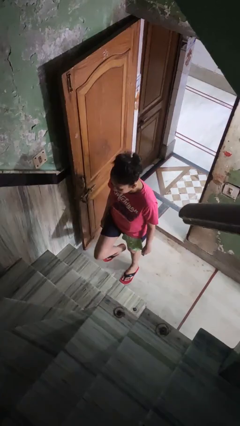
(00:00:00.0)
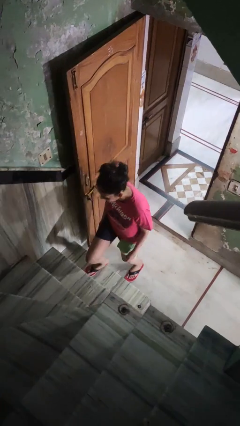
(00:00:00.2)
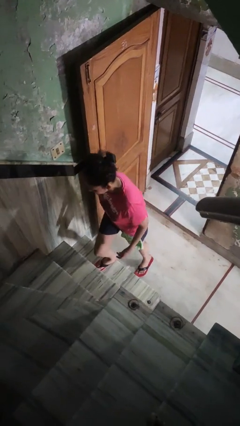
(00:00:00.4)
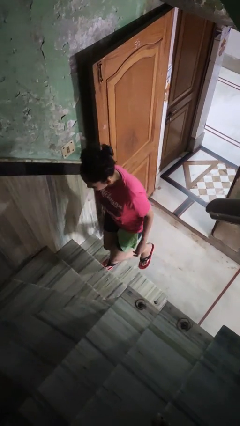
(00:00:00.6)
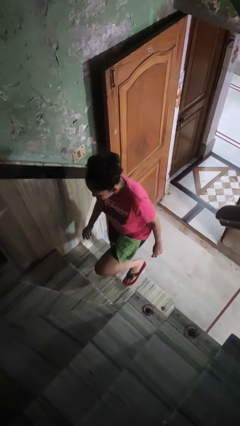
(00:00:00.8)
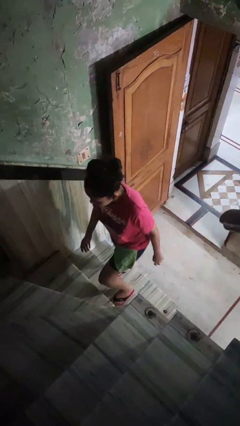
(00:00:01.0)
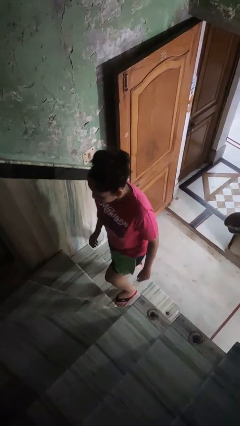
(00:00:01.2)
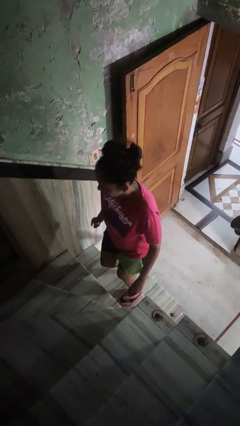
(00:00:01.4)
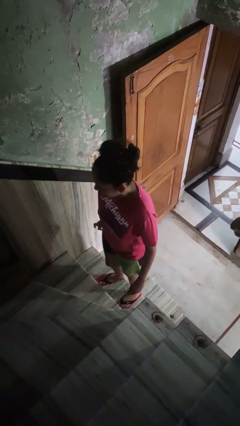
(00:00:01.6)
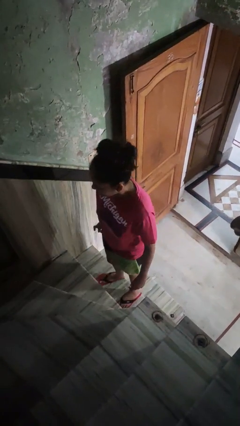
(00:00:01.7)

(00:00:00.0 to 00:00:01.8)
person climbs up stairs

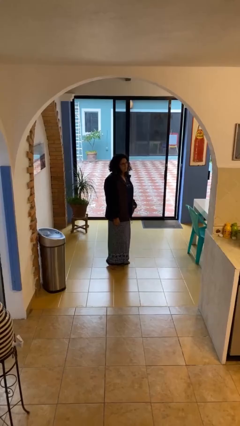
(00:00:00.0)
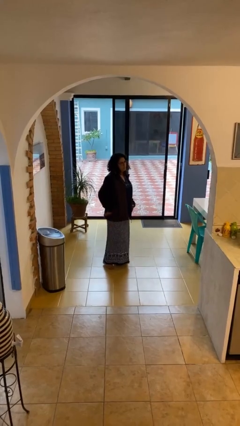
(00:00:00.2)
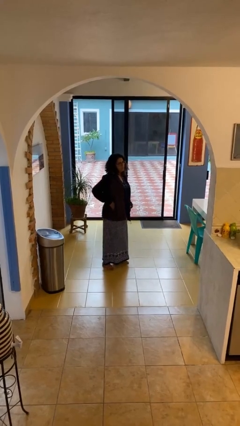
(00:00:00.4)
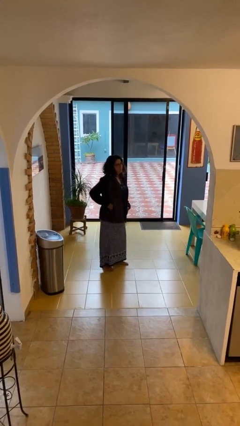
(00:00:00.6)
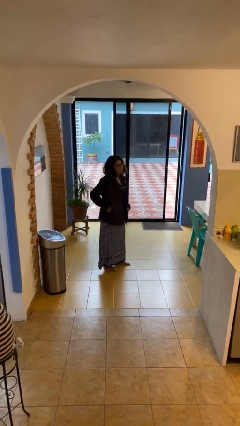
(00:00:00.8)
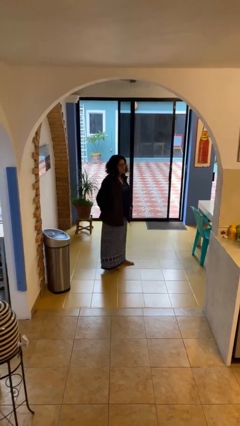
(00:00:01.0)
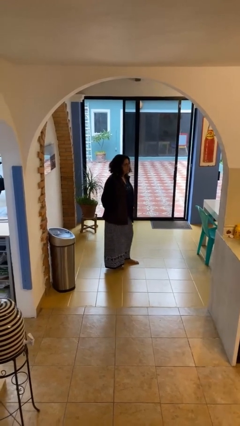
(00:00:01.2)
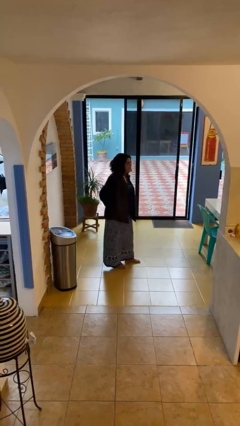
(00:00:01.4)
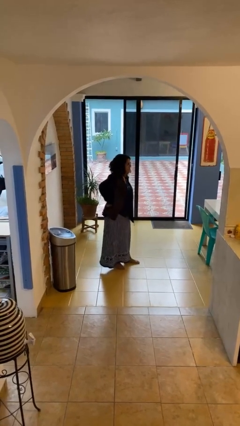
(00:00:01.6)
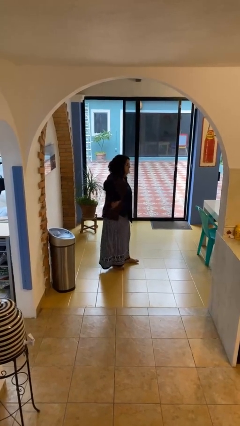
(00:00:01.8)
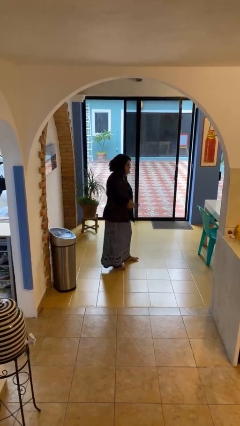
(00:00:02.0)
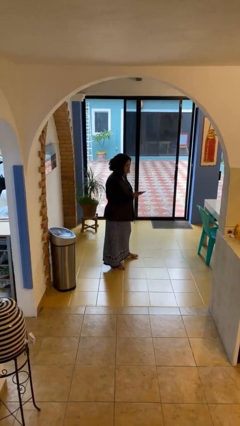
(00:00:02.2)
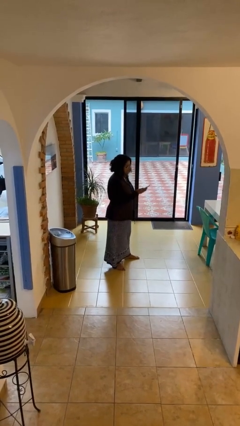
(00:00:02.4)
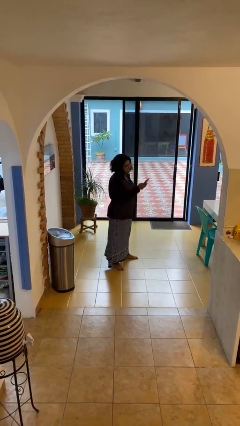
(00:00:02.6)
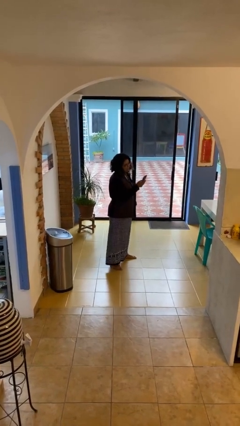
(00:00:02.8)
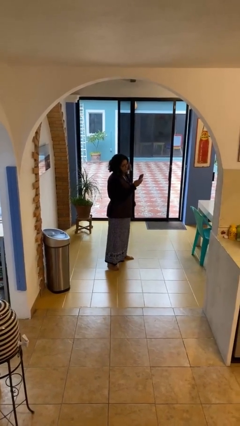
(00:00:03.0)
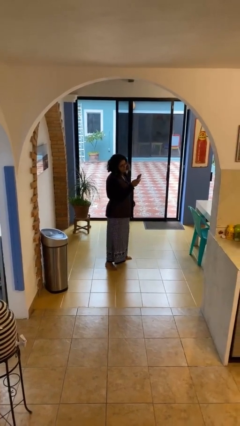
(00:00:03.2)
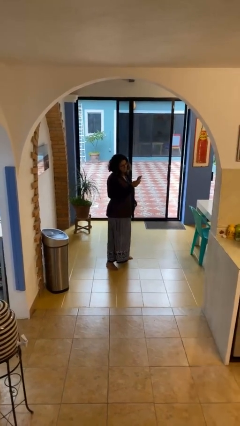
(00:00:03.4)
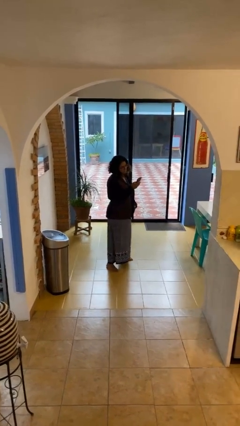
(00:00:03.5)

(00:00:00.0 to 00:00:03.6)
person takes phone from pocket

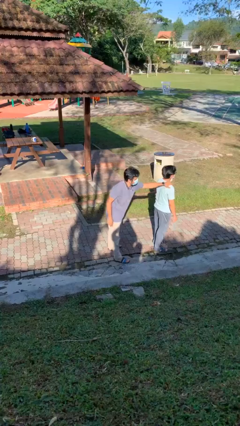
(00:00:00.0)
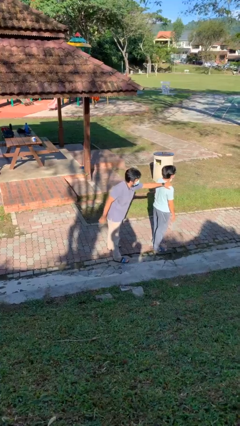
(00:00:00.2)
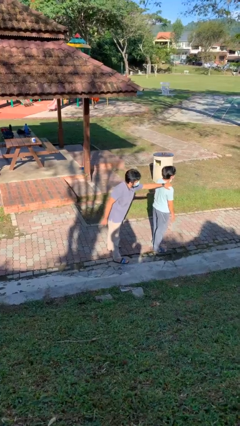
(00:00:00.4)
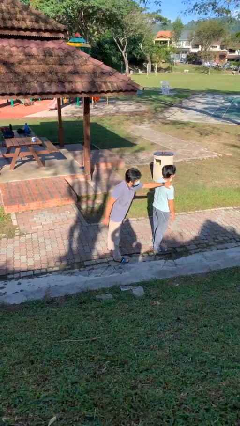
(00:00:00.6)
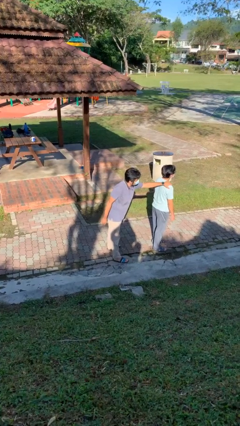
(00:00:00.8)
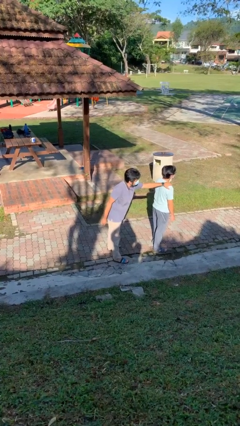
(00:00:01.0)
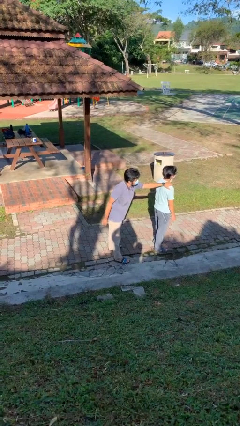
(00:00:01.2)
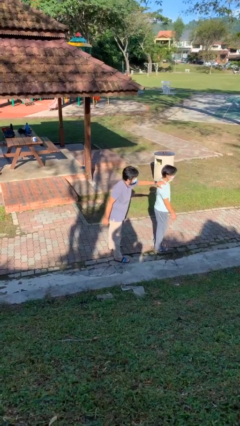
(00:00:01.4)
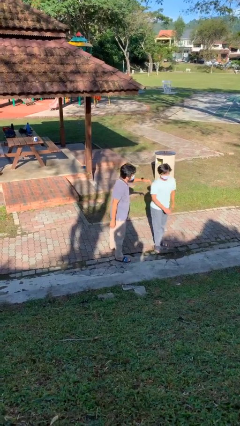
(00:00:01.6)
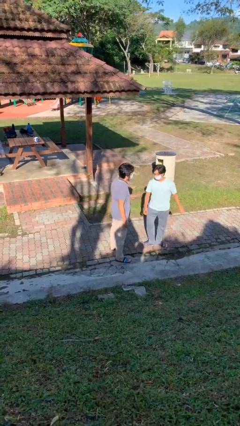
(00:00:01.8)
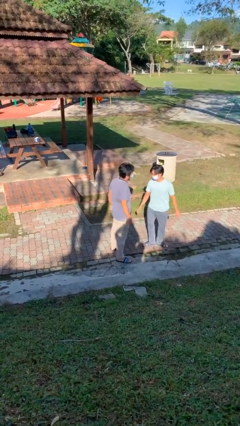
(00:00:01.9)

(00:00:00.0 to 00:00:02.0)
person grabs person by shoulder

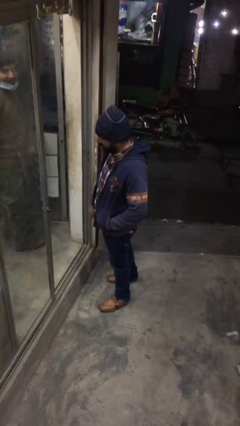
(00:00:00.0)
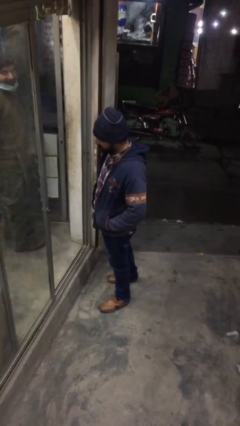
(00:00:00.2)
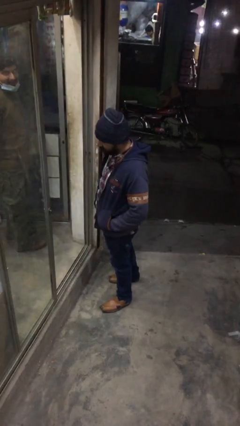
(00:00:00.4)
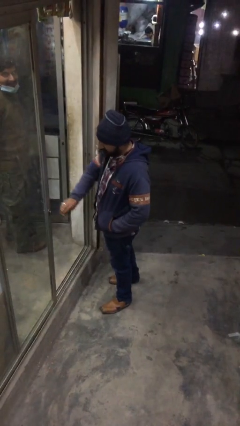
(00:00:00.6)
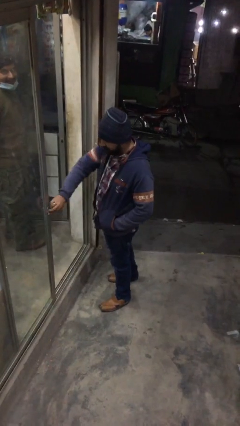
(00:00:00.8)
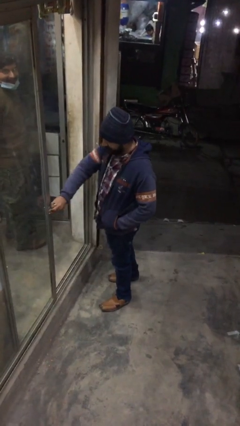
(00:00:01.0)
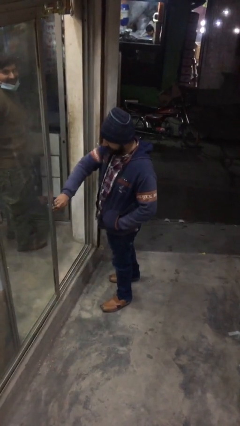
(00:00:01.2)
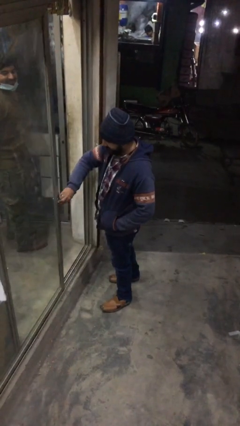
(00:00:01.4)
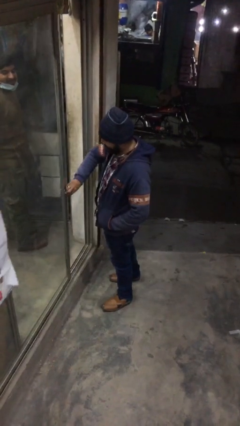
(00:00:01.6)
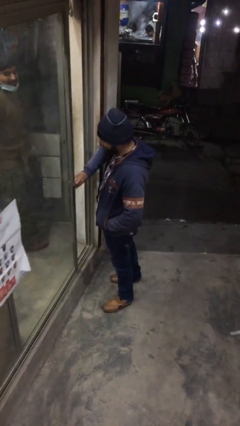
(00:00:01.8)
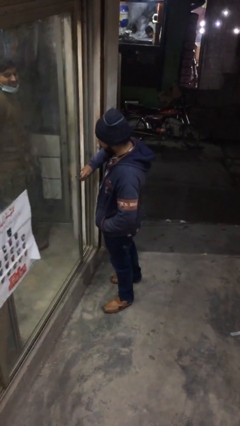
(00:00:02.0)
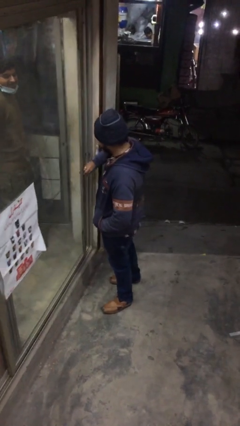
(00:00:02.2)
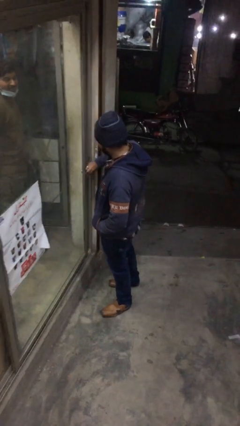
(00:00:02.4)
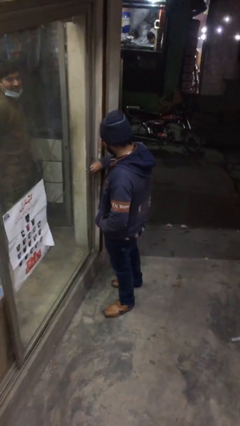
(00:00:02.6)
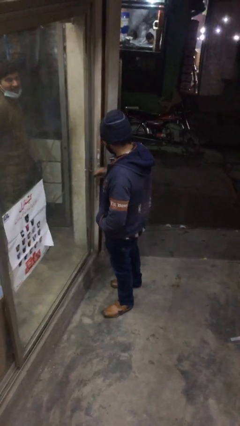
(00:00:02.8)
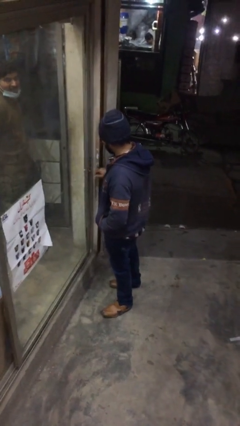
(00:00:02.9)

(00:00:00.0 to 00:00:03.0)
person closes facility door

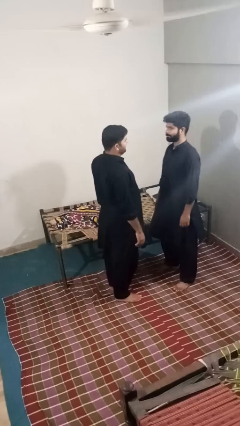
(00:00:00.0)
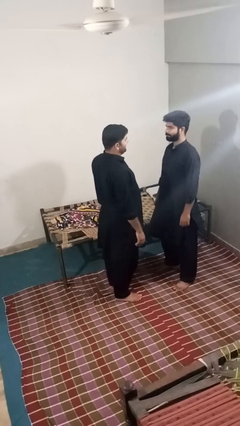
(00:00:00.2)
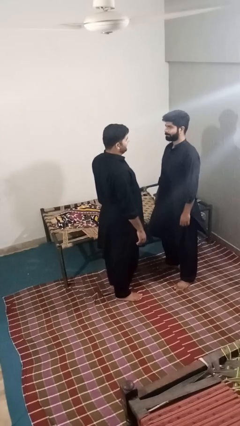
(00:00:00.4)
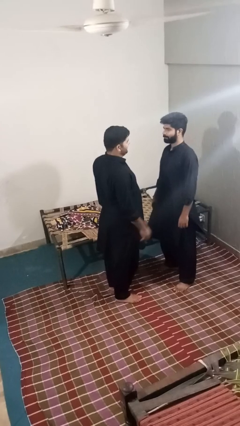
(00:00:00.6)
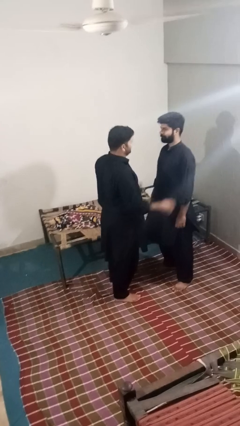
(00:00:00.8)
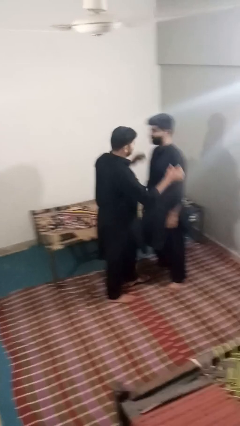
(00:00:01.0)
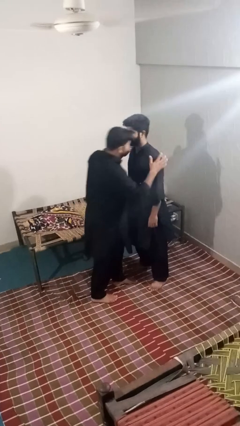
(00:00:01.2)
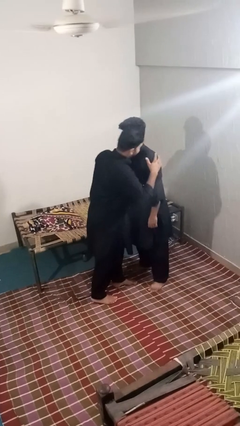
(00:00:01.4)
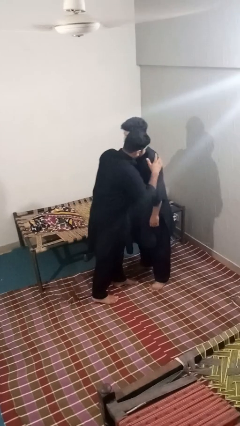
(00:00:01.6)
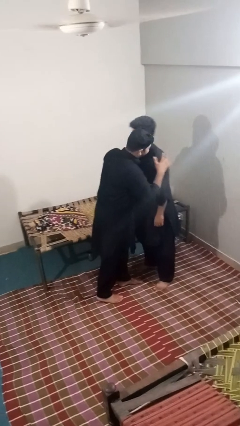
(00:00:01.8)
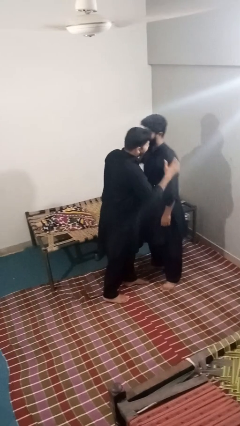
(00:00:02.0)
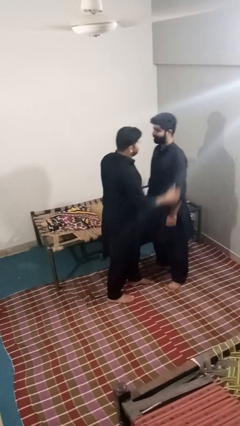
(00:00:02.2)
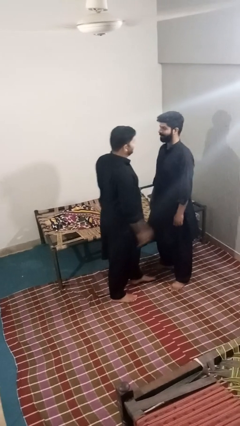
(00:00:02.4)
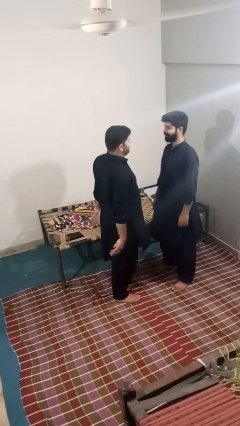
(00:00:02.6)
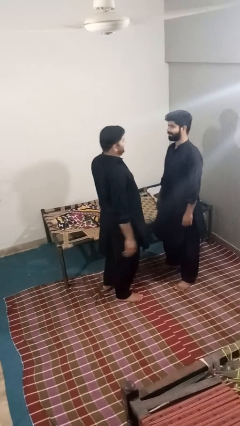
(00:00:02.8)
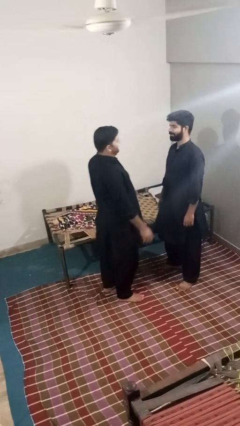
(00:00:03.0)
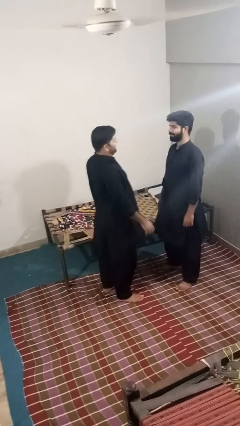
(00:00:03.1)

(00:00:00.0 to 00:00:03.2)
person kisses cheek of person

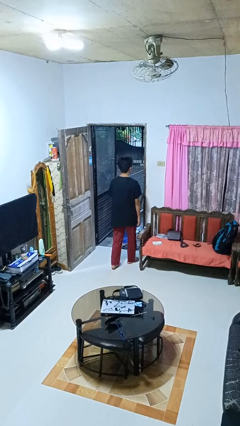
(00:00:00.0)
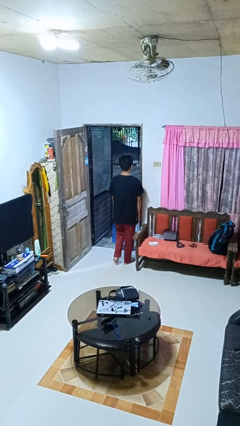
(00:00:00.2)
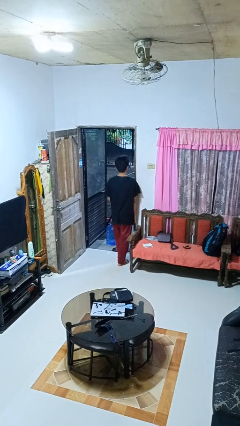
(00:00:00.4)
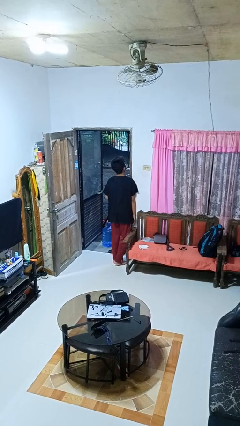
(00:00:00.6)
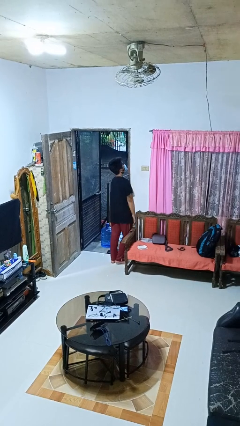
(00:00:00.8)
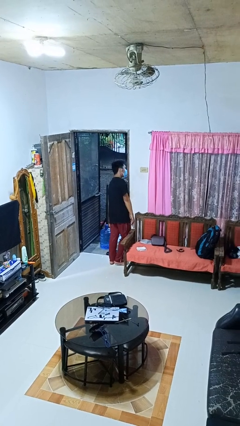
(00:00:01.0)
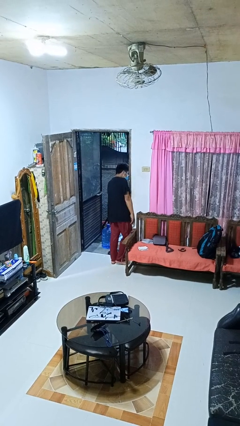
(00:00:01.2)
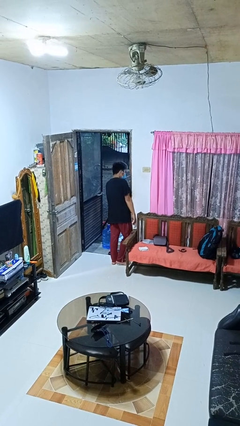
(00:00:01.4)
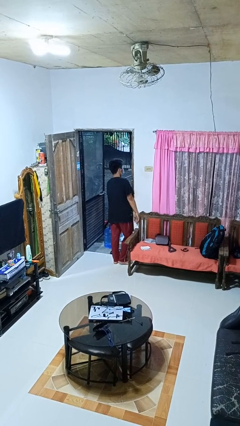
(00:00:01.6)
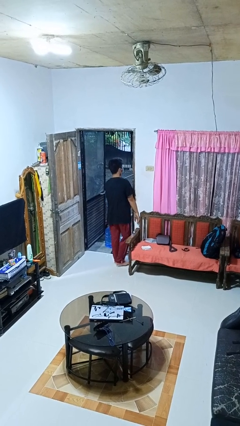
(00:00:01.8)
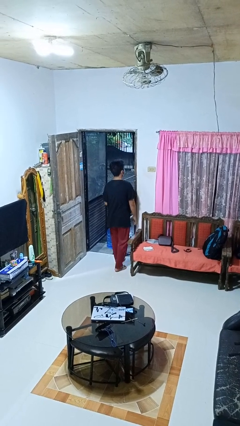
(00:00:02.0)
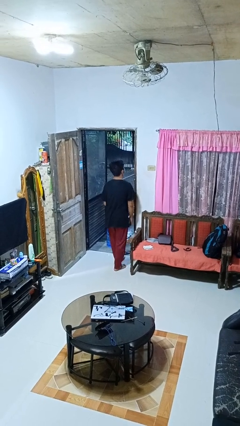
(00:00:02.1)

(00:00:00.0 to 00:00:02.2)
person bumps into wall

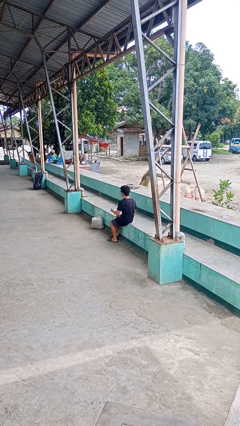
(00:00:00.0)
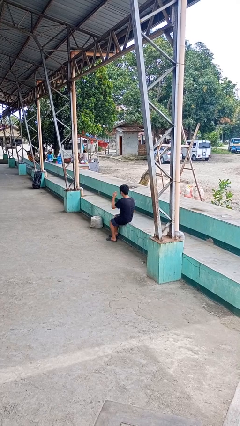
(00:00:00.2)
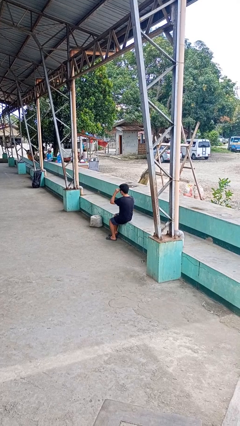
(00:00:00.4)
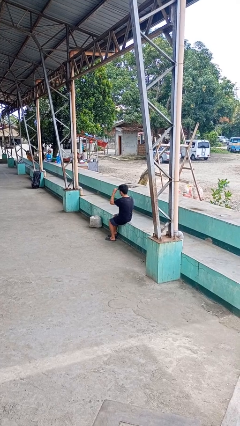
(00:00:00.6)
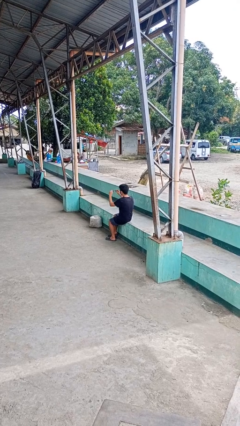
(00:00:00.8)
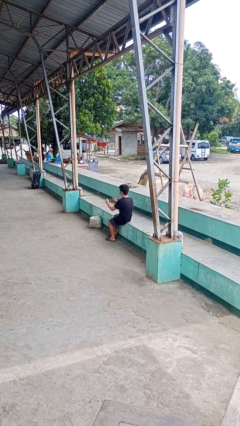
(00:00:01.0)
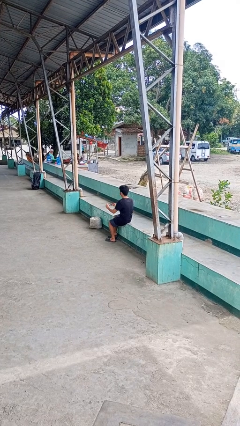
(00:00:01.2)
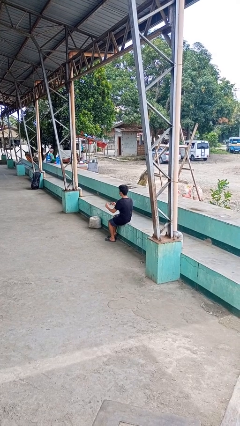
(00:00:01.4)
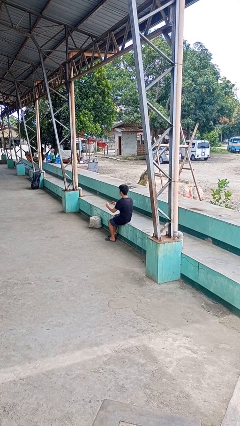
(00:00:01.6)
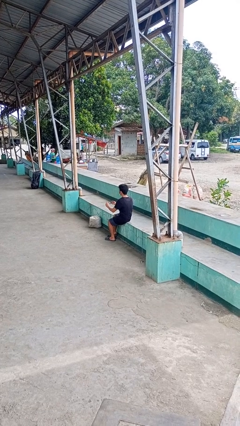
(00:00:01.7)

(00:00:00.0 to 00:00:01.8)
person takes off sunglasses
